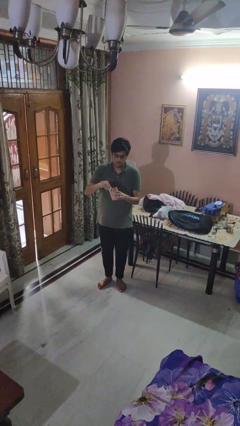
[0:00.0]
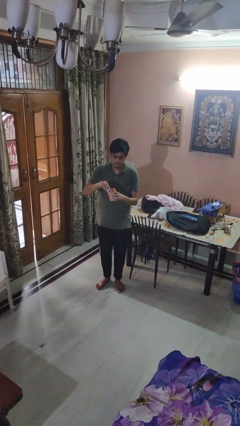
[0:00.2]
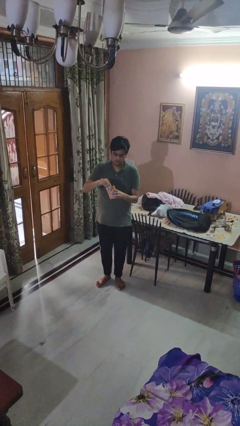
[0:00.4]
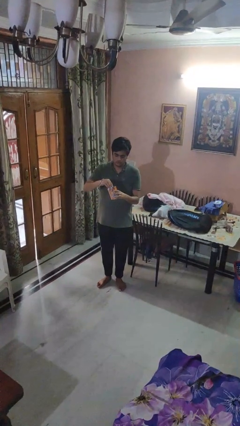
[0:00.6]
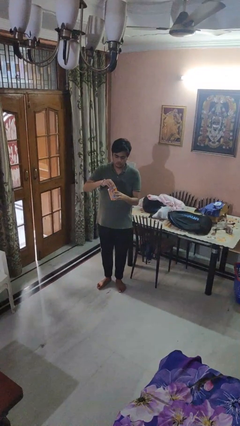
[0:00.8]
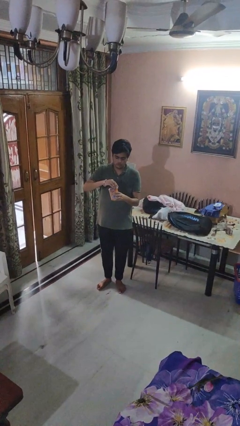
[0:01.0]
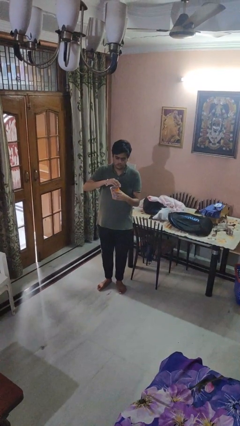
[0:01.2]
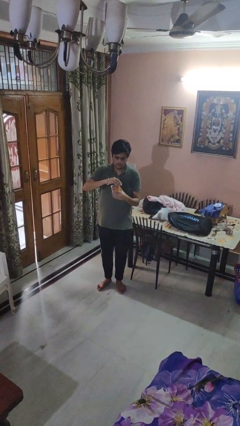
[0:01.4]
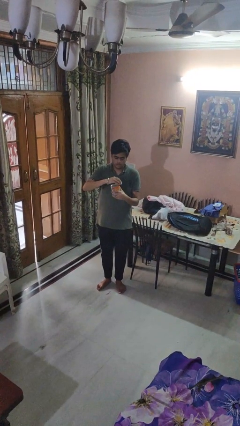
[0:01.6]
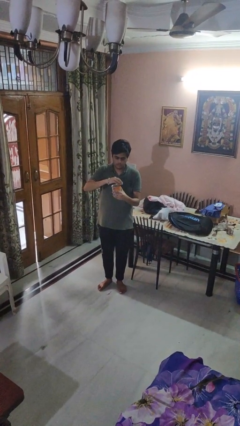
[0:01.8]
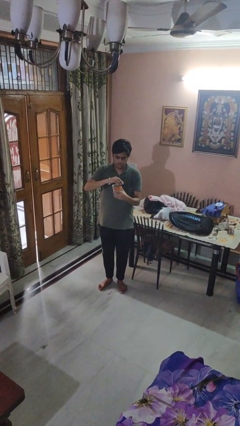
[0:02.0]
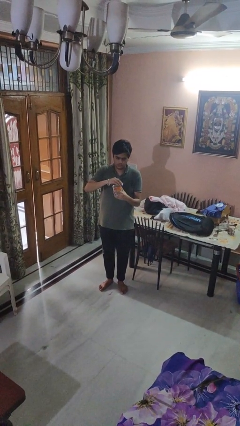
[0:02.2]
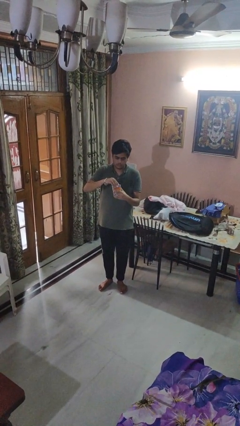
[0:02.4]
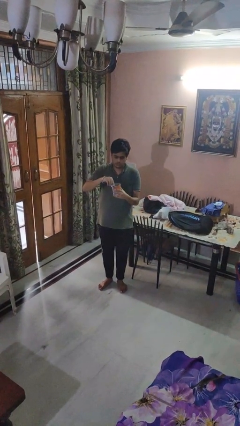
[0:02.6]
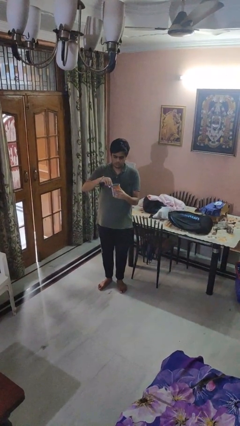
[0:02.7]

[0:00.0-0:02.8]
person opens can with can opener

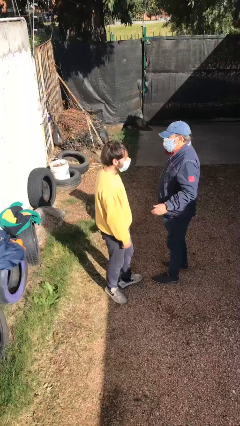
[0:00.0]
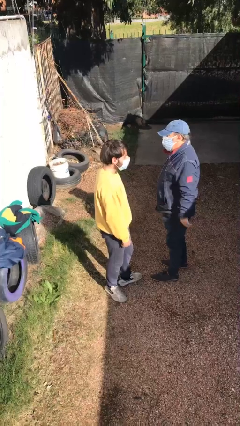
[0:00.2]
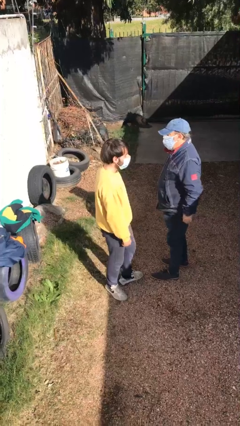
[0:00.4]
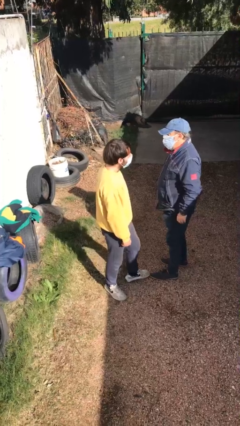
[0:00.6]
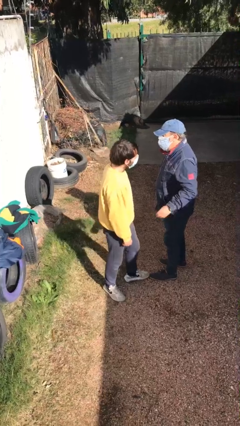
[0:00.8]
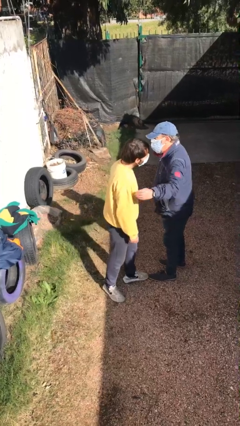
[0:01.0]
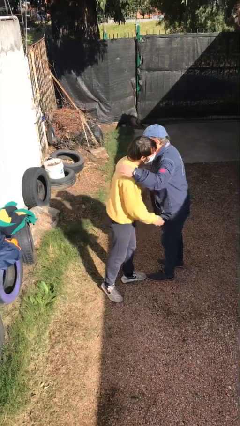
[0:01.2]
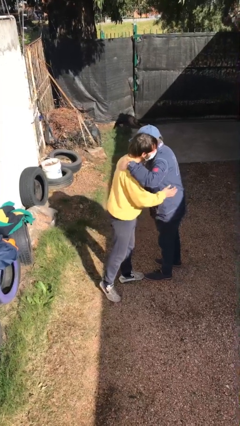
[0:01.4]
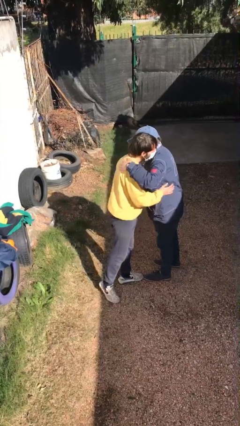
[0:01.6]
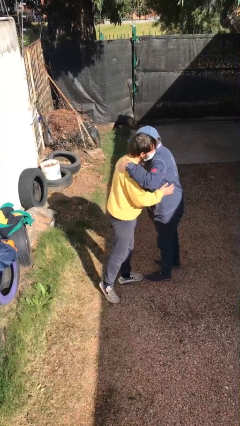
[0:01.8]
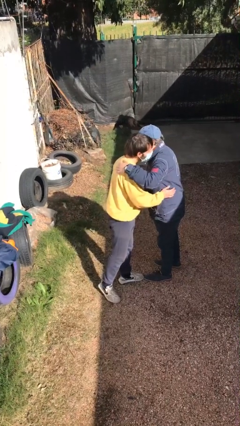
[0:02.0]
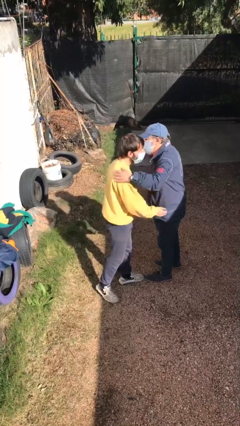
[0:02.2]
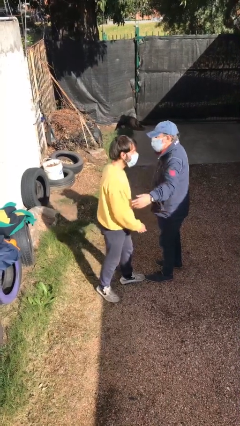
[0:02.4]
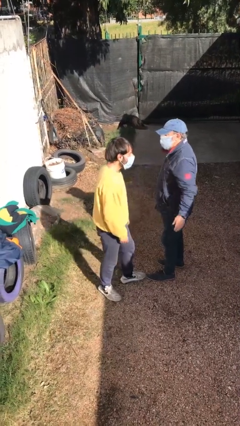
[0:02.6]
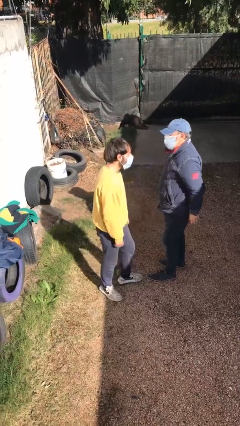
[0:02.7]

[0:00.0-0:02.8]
person kisses cheek of person

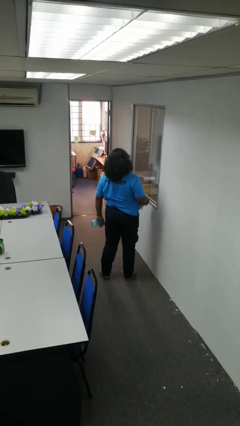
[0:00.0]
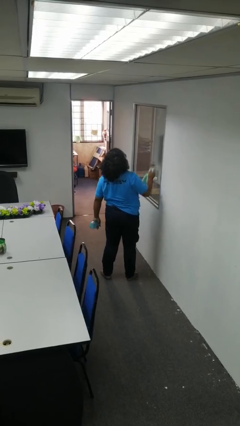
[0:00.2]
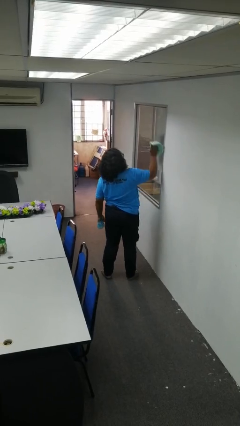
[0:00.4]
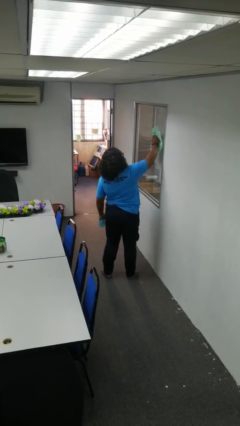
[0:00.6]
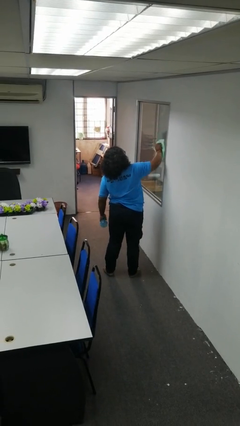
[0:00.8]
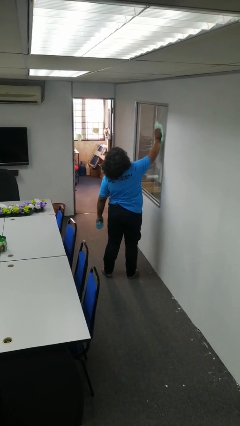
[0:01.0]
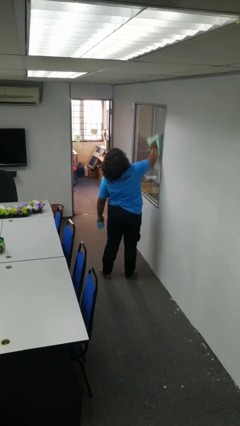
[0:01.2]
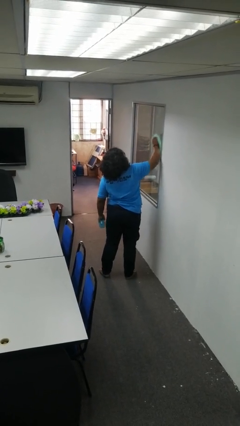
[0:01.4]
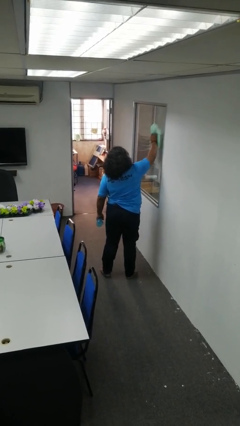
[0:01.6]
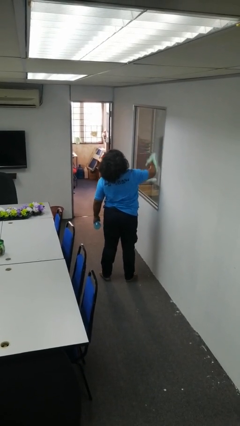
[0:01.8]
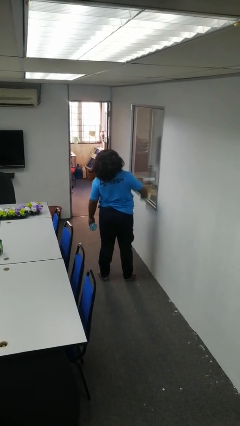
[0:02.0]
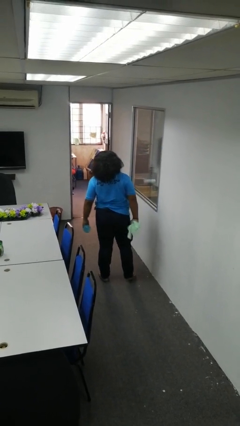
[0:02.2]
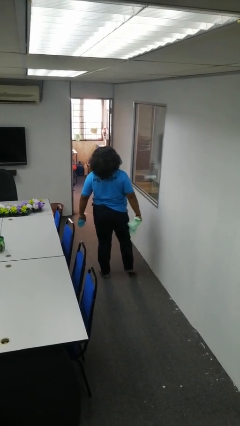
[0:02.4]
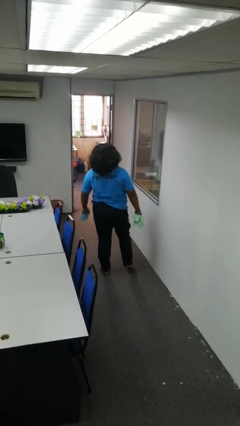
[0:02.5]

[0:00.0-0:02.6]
person washes window

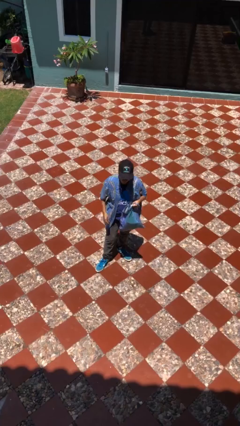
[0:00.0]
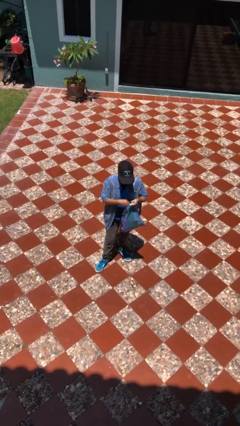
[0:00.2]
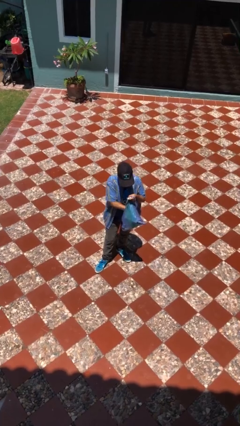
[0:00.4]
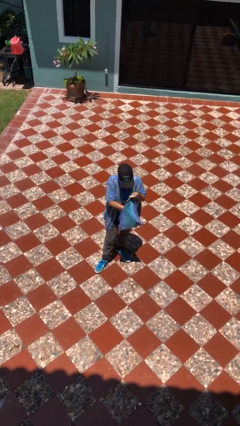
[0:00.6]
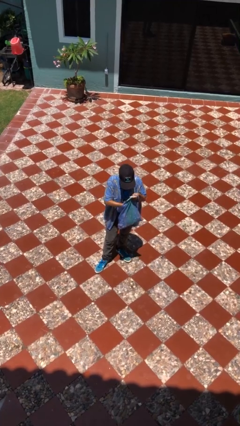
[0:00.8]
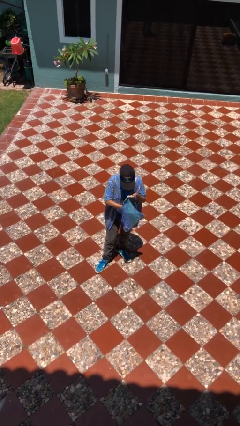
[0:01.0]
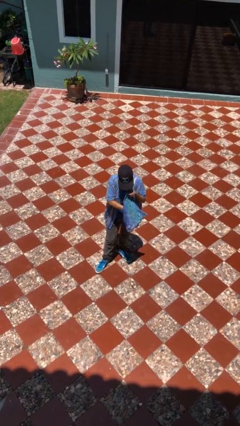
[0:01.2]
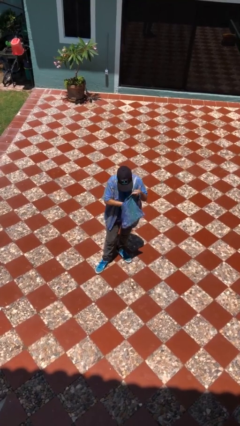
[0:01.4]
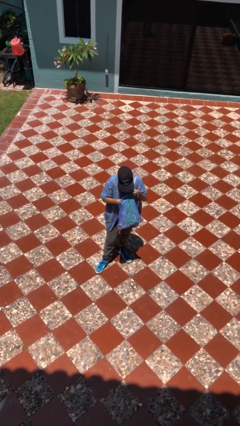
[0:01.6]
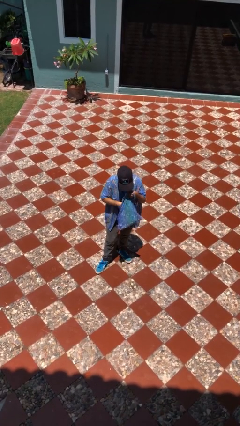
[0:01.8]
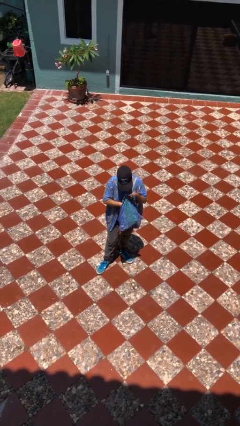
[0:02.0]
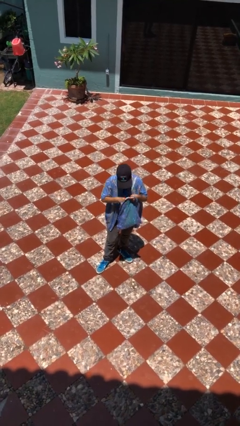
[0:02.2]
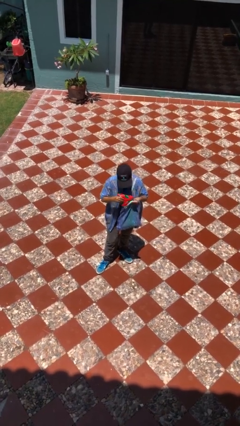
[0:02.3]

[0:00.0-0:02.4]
person searches in purse

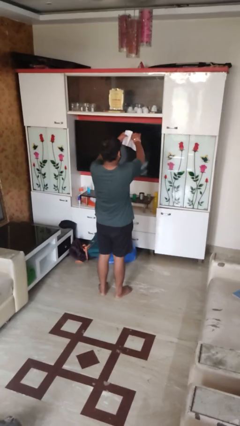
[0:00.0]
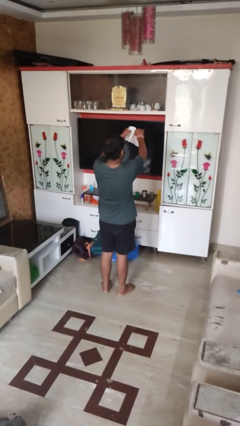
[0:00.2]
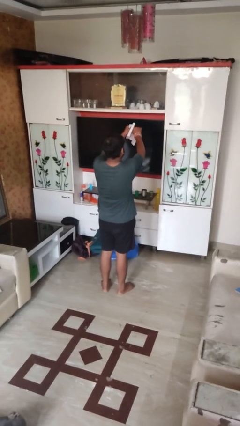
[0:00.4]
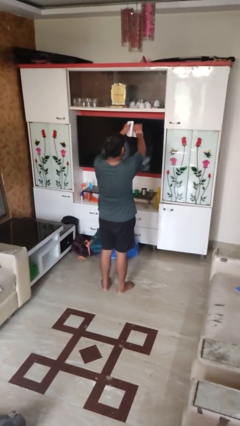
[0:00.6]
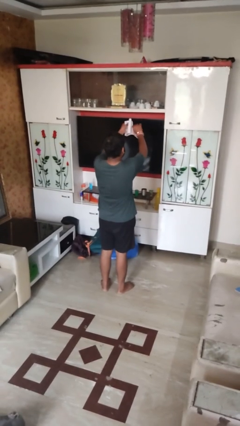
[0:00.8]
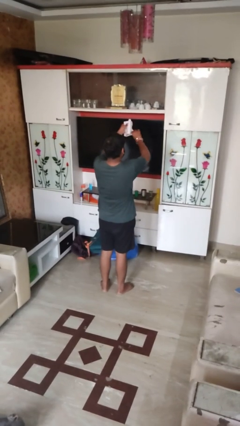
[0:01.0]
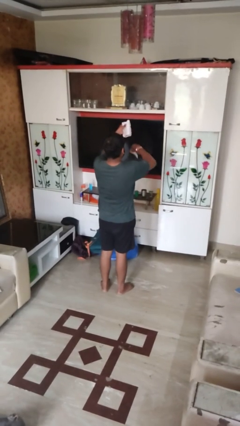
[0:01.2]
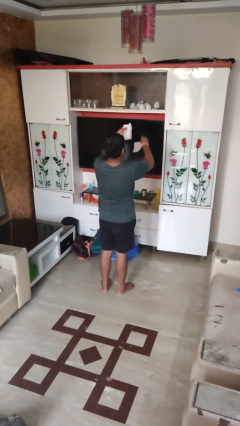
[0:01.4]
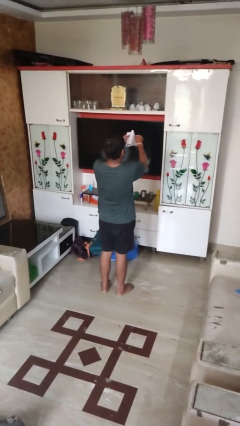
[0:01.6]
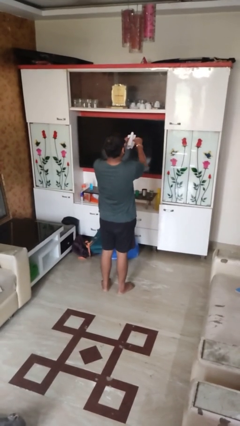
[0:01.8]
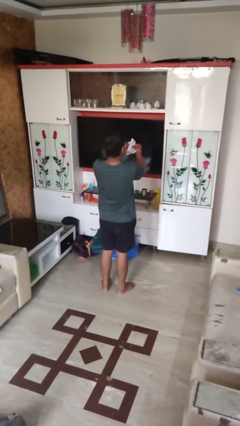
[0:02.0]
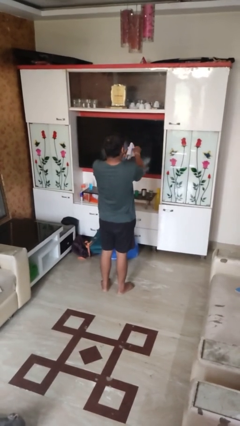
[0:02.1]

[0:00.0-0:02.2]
person tears paper

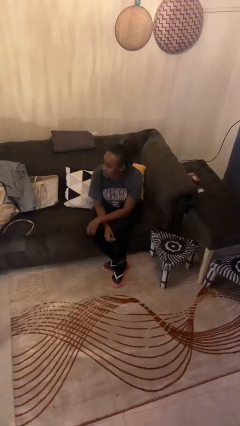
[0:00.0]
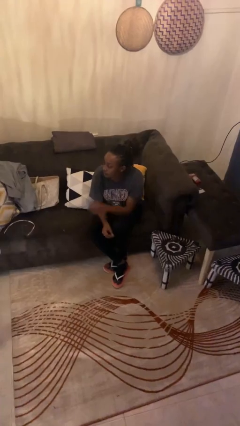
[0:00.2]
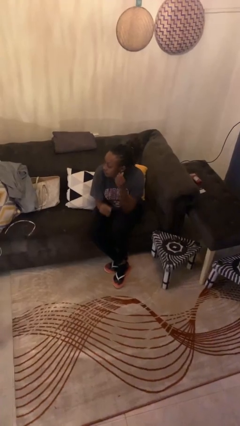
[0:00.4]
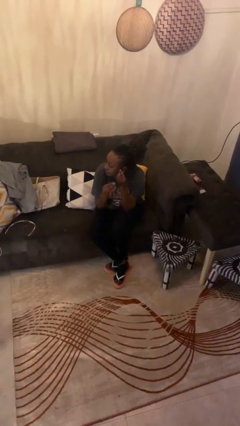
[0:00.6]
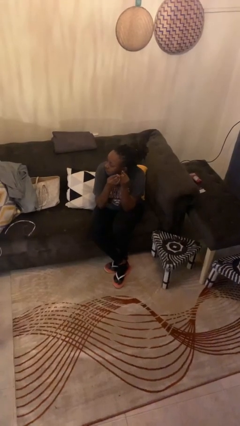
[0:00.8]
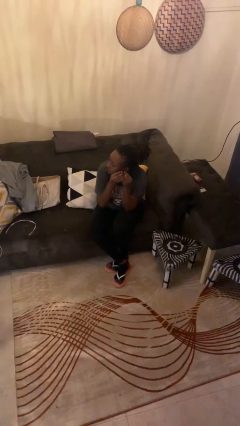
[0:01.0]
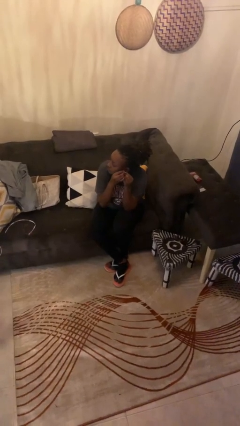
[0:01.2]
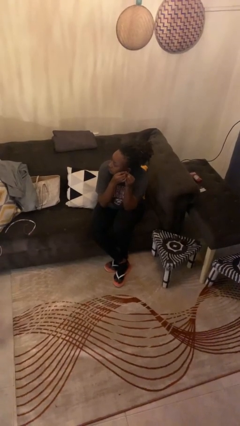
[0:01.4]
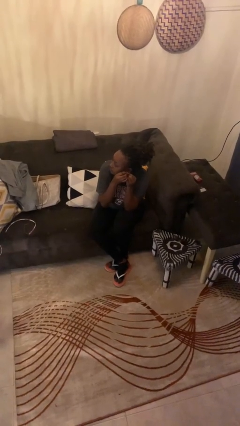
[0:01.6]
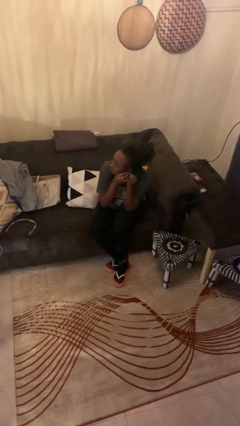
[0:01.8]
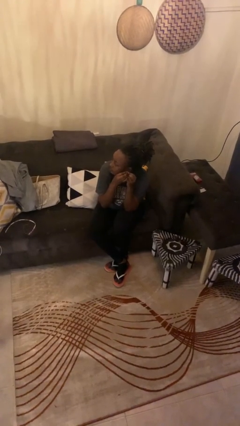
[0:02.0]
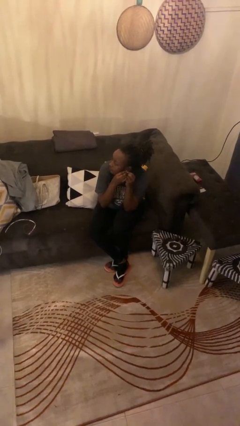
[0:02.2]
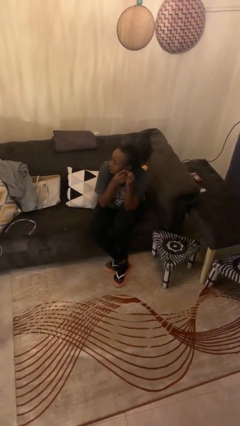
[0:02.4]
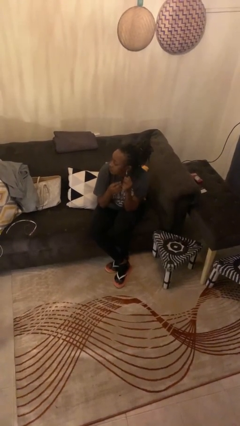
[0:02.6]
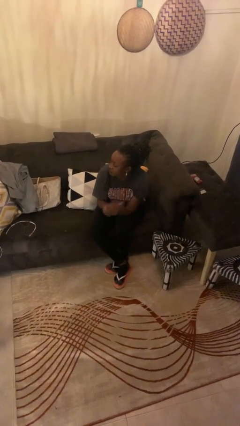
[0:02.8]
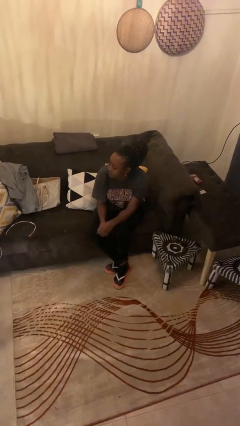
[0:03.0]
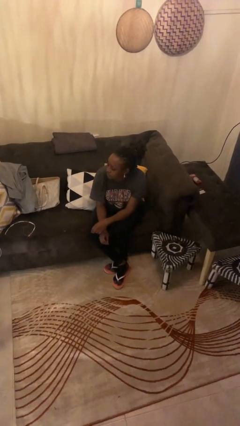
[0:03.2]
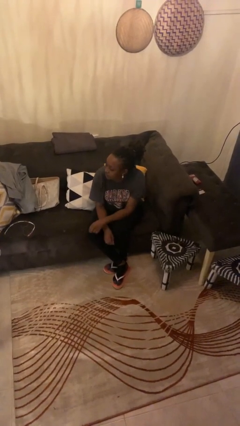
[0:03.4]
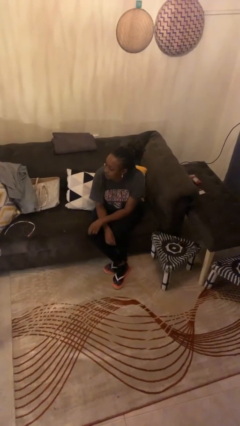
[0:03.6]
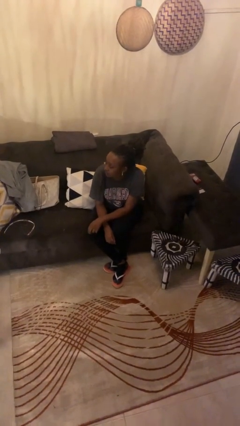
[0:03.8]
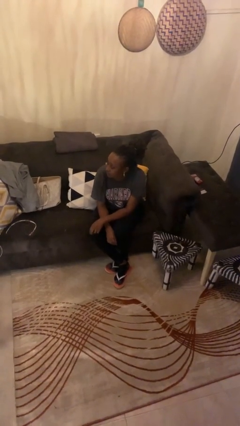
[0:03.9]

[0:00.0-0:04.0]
person puts on earrings

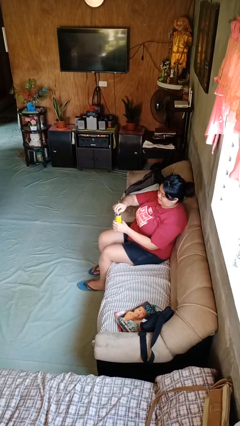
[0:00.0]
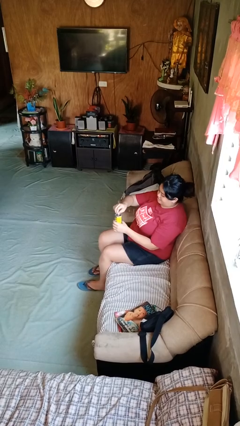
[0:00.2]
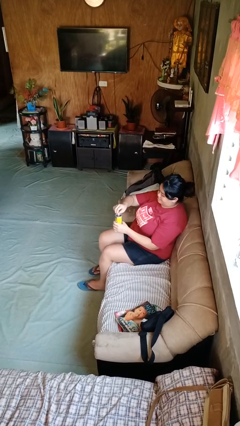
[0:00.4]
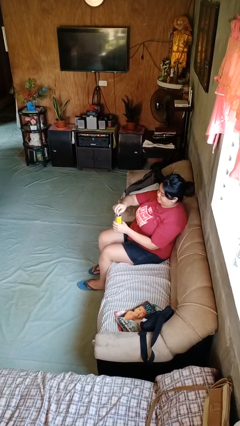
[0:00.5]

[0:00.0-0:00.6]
person opens beverage can
